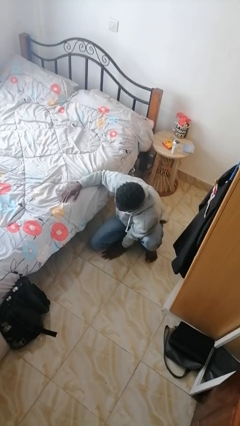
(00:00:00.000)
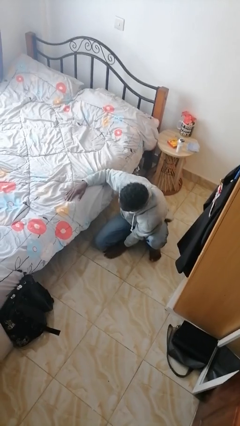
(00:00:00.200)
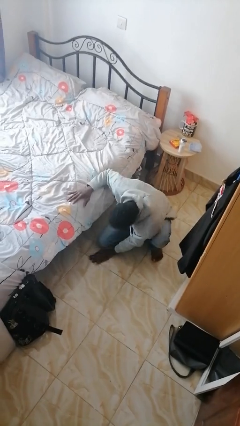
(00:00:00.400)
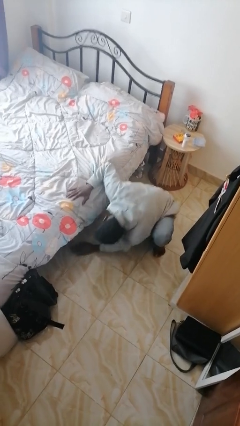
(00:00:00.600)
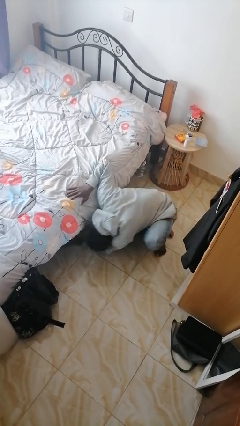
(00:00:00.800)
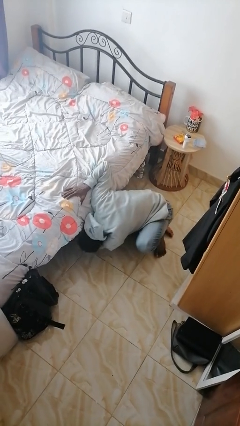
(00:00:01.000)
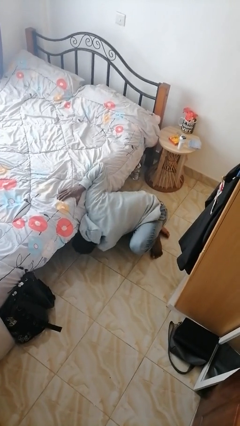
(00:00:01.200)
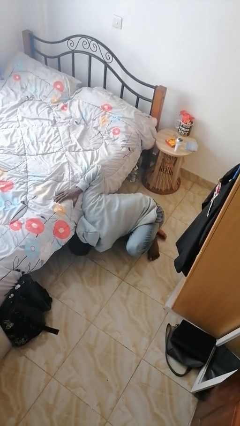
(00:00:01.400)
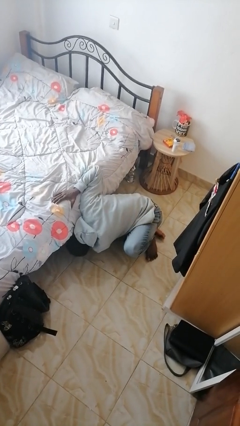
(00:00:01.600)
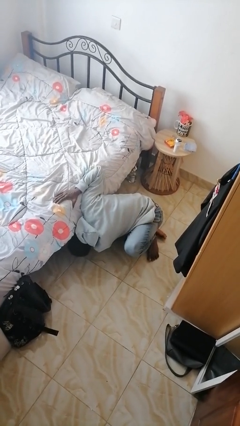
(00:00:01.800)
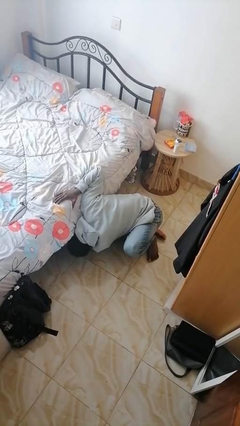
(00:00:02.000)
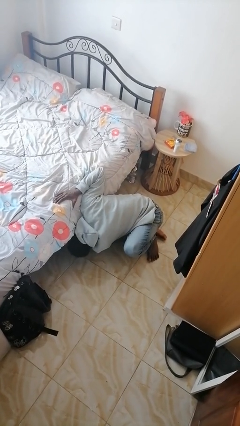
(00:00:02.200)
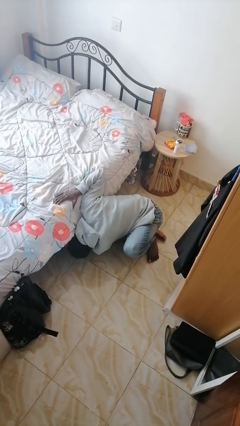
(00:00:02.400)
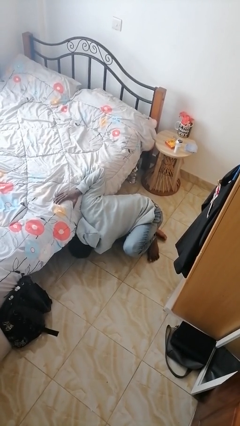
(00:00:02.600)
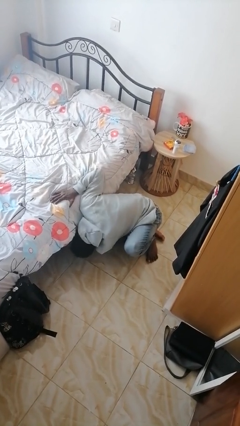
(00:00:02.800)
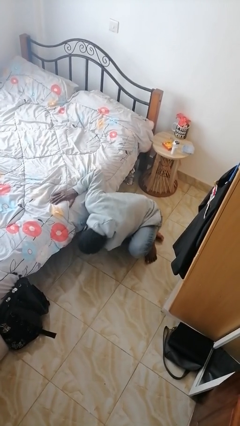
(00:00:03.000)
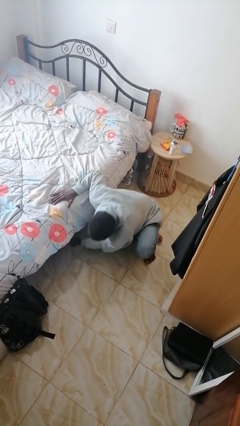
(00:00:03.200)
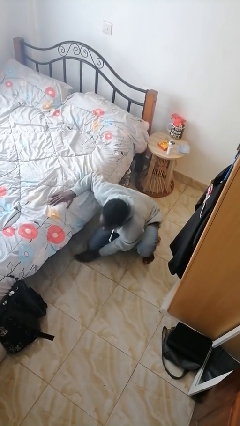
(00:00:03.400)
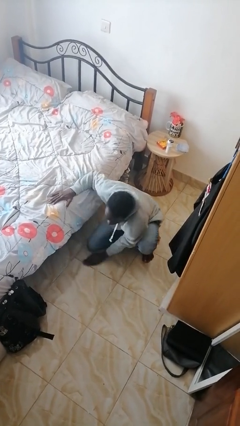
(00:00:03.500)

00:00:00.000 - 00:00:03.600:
person searches under bed

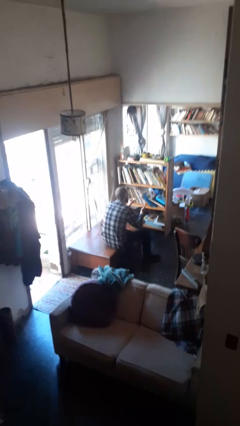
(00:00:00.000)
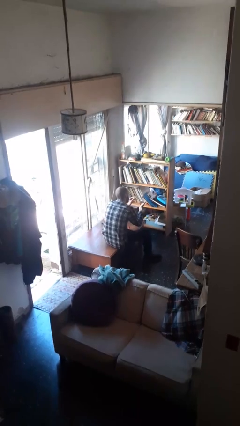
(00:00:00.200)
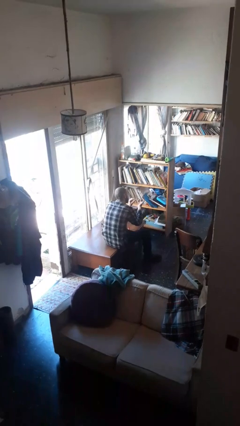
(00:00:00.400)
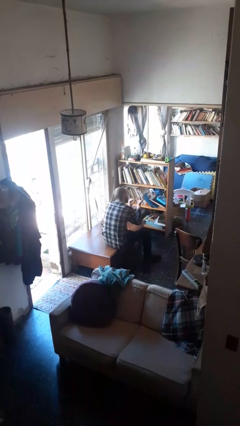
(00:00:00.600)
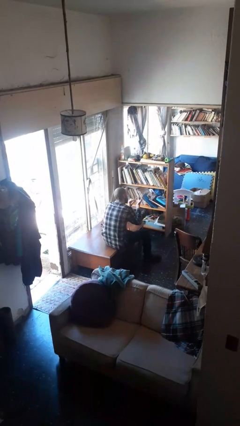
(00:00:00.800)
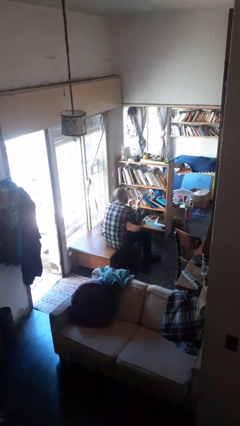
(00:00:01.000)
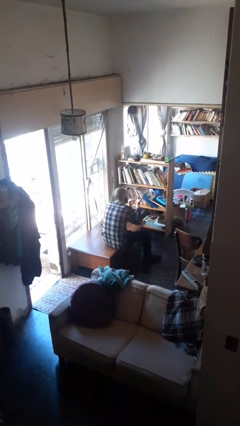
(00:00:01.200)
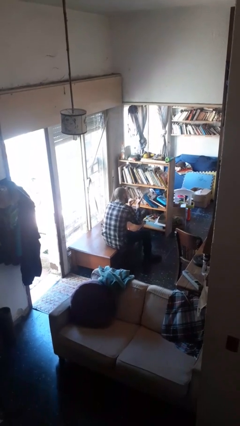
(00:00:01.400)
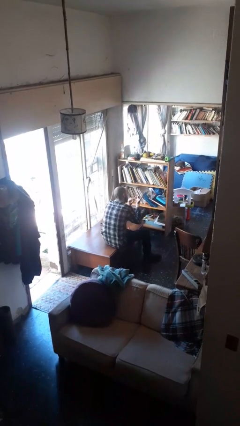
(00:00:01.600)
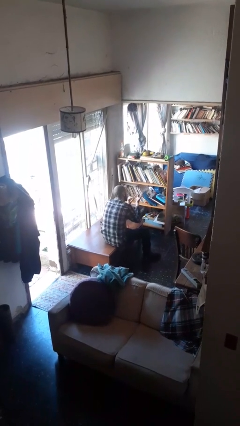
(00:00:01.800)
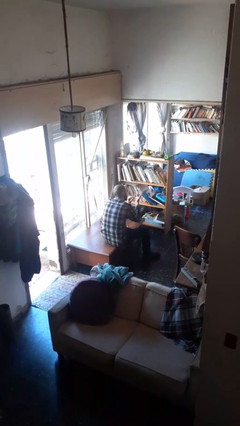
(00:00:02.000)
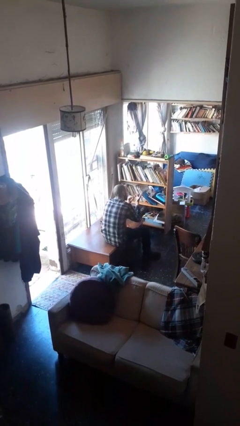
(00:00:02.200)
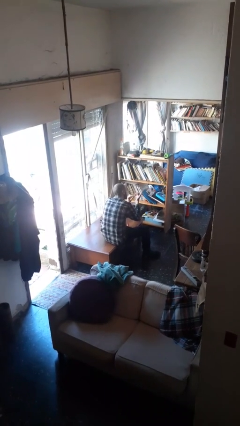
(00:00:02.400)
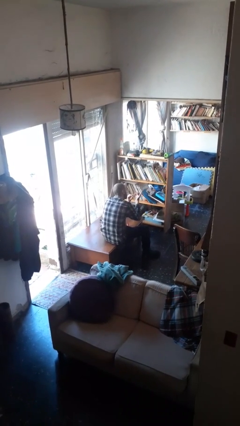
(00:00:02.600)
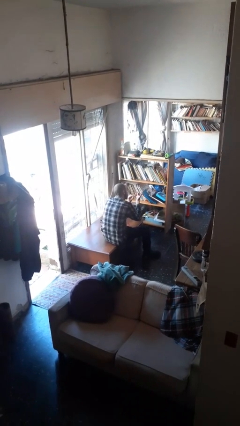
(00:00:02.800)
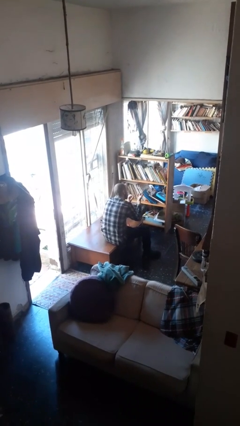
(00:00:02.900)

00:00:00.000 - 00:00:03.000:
person paints fingernails

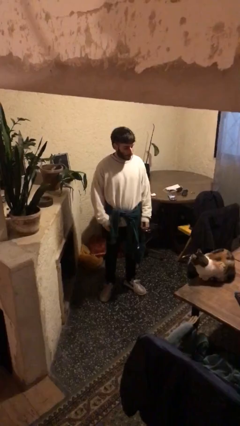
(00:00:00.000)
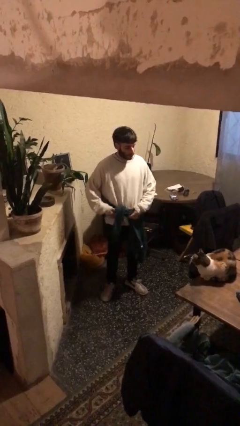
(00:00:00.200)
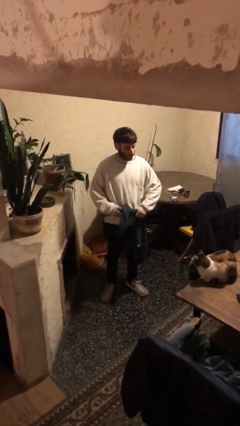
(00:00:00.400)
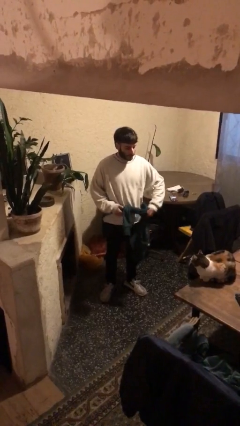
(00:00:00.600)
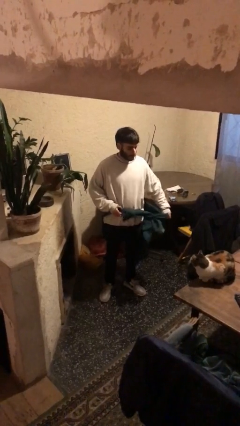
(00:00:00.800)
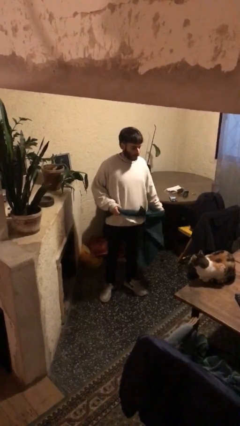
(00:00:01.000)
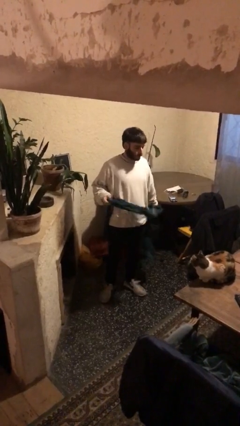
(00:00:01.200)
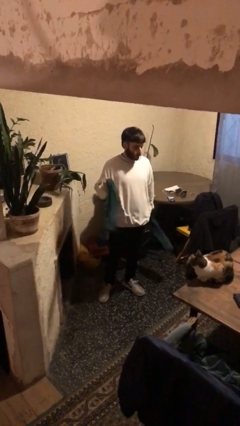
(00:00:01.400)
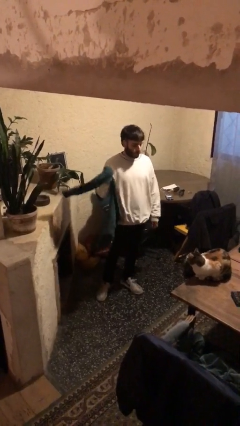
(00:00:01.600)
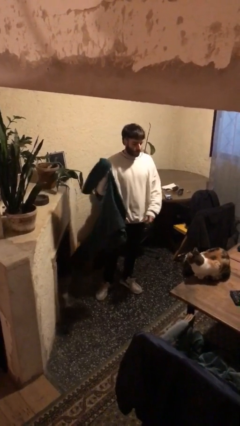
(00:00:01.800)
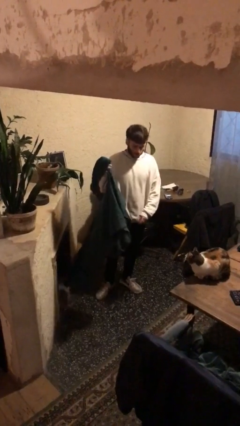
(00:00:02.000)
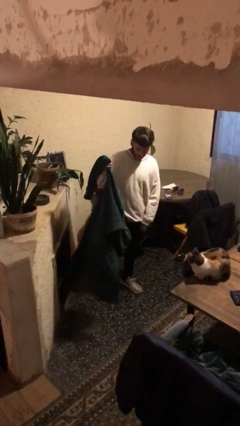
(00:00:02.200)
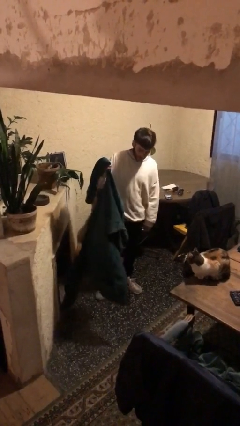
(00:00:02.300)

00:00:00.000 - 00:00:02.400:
person unties jacket around waist

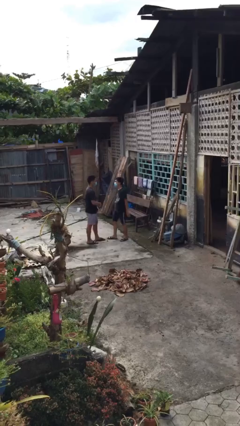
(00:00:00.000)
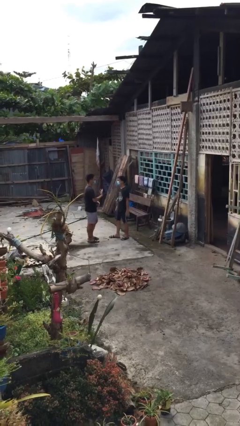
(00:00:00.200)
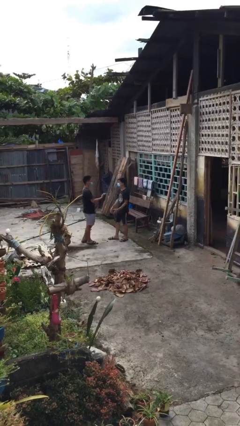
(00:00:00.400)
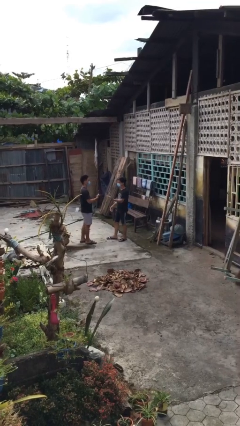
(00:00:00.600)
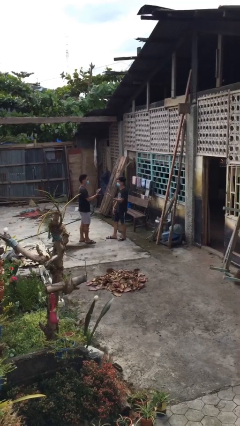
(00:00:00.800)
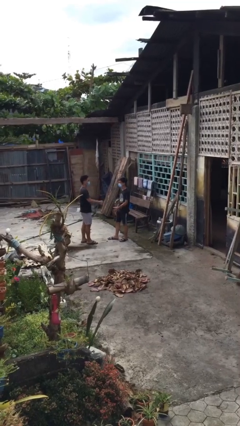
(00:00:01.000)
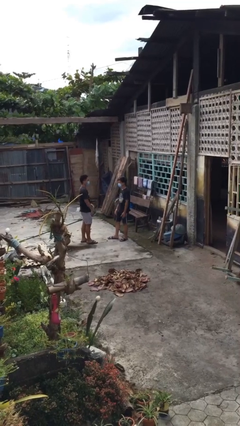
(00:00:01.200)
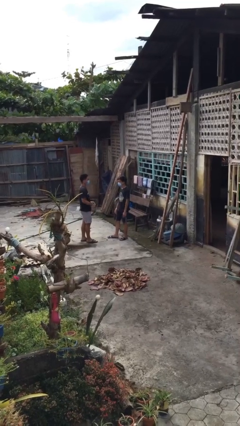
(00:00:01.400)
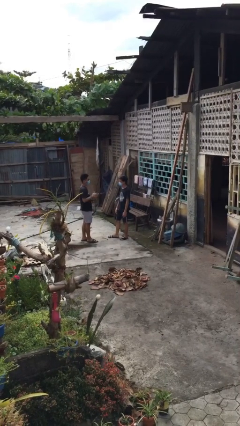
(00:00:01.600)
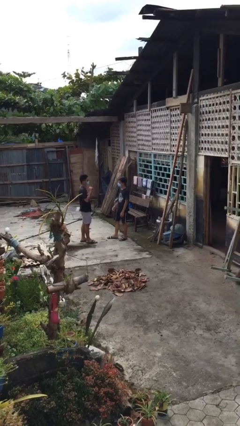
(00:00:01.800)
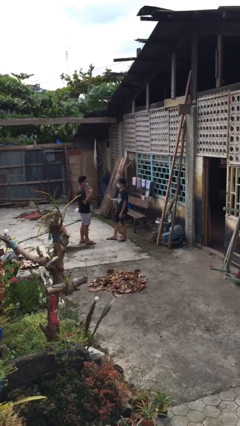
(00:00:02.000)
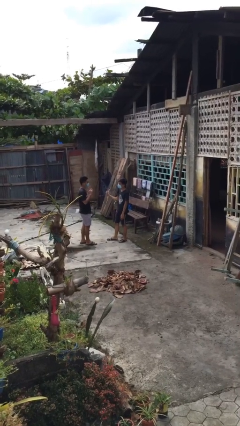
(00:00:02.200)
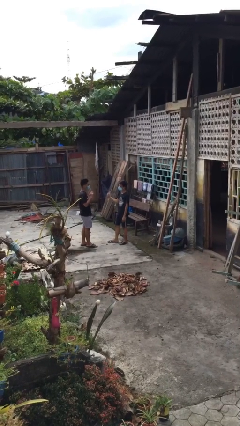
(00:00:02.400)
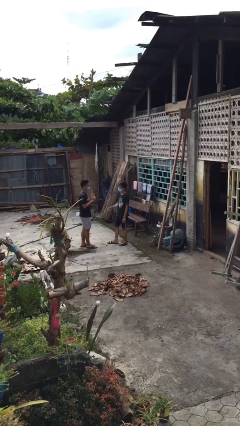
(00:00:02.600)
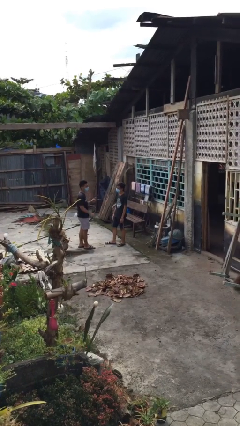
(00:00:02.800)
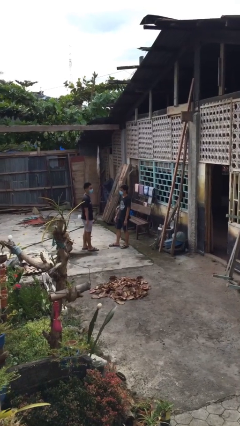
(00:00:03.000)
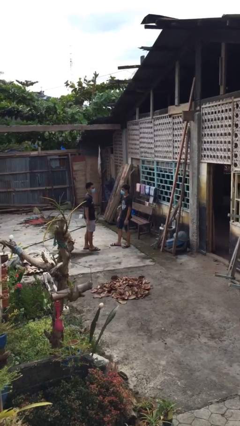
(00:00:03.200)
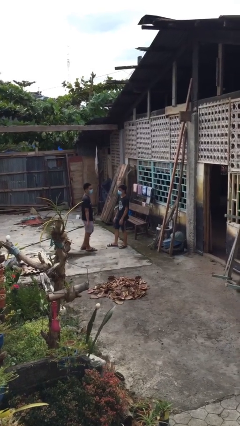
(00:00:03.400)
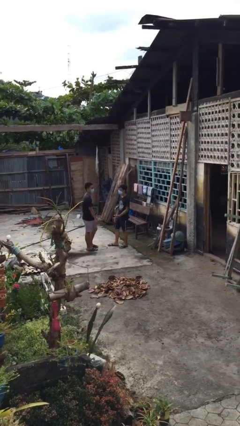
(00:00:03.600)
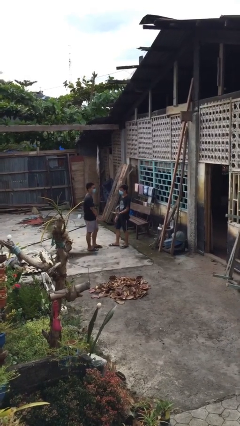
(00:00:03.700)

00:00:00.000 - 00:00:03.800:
person talks to person

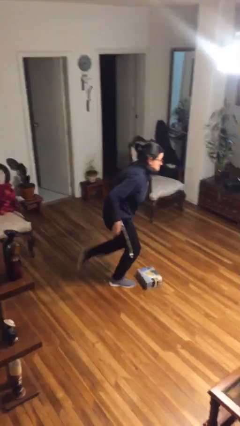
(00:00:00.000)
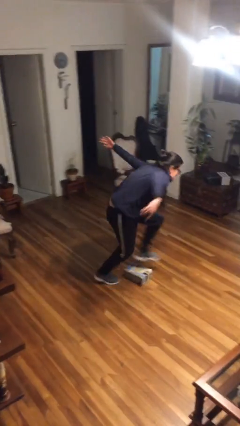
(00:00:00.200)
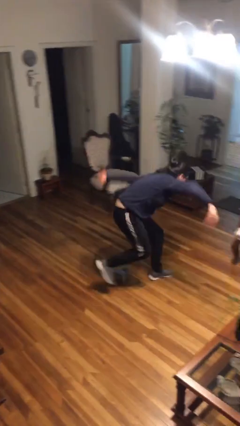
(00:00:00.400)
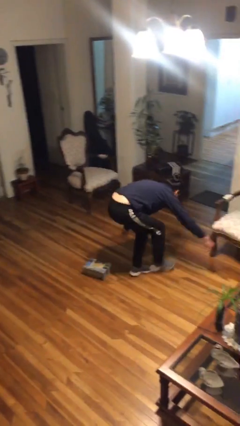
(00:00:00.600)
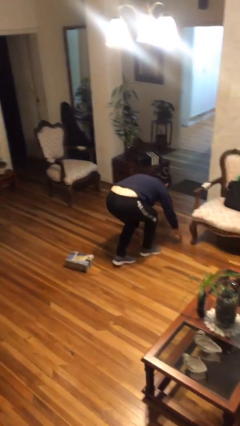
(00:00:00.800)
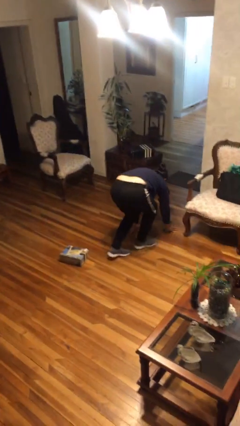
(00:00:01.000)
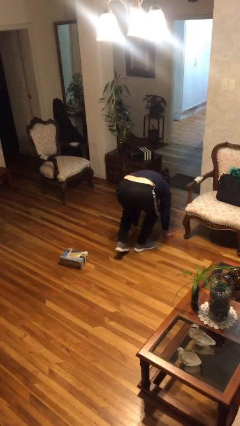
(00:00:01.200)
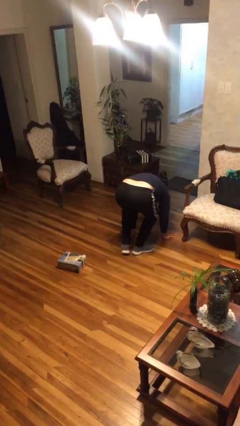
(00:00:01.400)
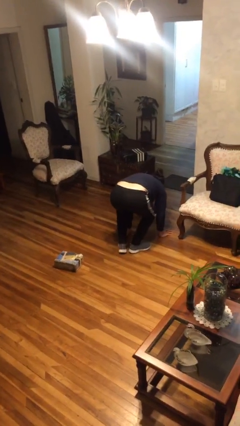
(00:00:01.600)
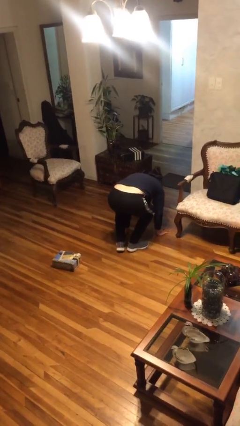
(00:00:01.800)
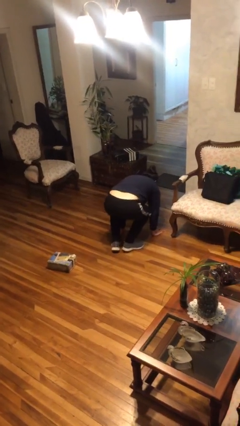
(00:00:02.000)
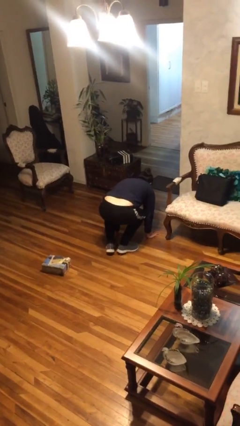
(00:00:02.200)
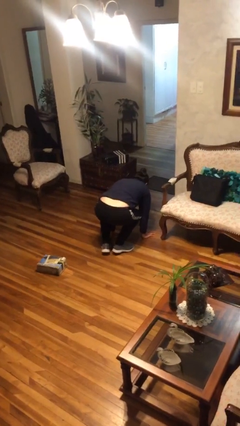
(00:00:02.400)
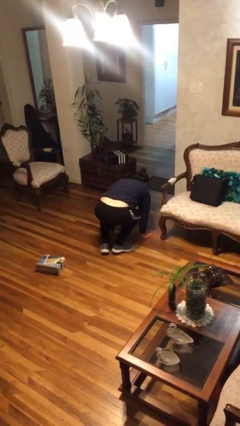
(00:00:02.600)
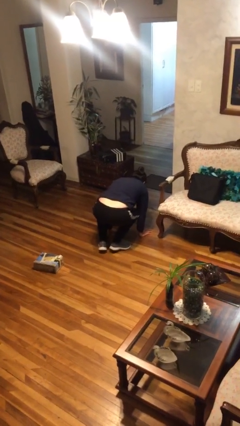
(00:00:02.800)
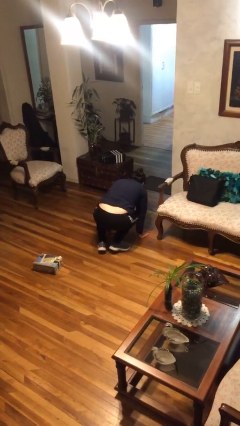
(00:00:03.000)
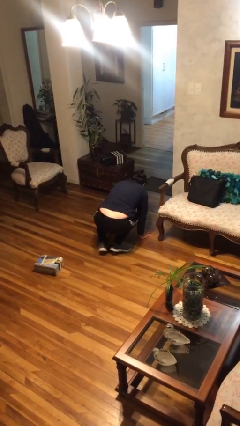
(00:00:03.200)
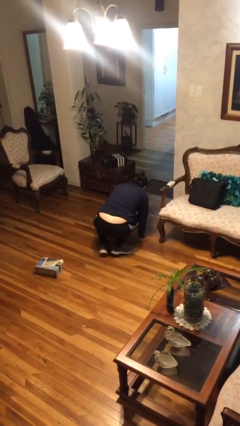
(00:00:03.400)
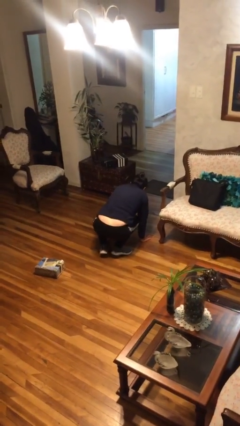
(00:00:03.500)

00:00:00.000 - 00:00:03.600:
person trips on object on floor

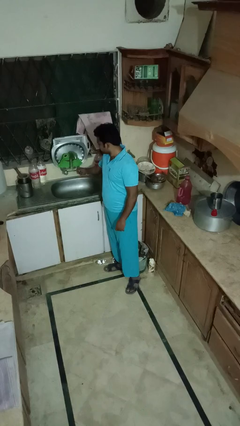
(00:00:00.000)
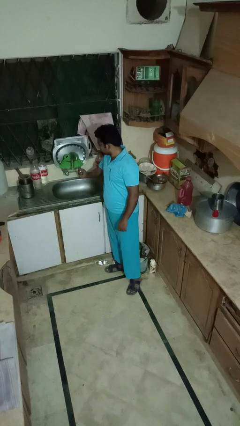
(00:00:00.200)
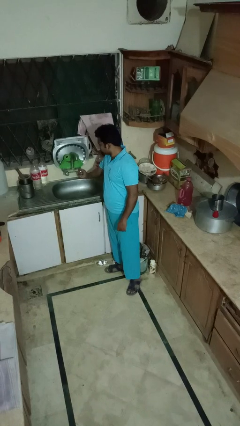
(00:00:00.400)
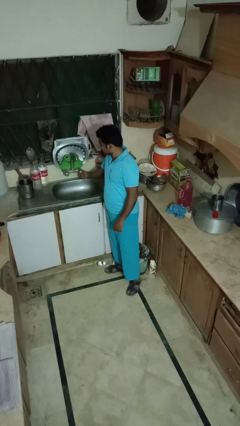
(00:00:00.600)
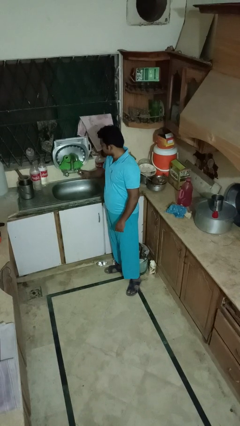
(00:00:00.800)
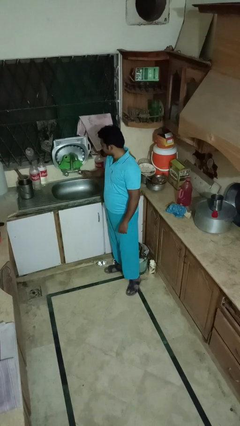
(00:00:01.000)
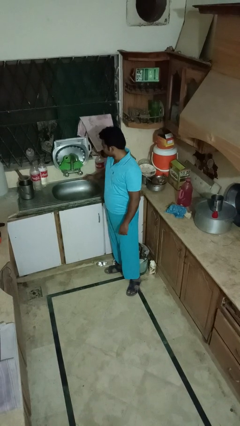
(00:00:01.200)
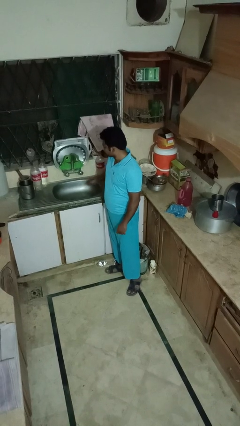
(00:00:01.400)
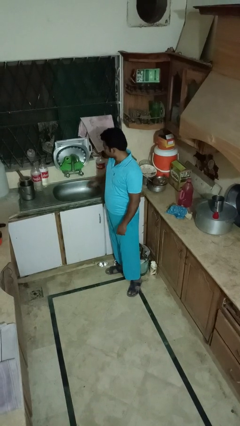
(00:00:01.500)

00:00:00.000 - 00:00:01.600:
person turns off faucet
